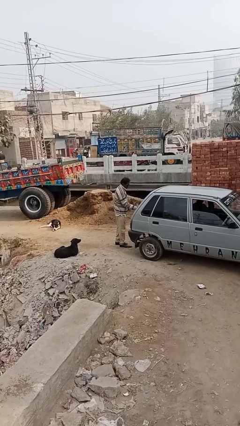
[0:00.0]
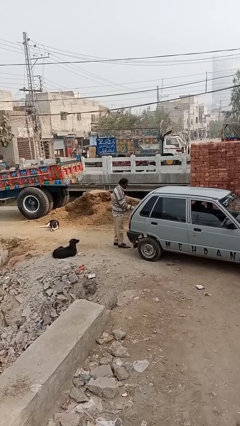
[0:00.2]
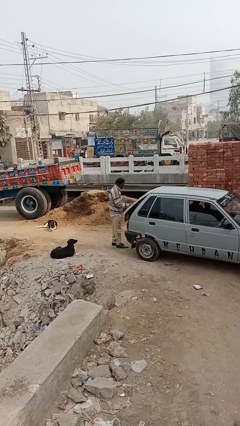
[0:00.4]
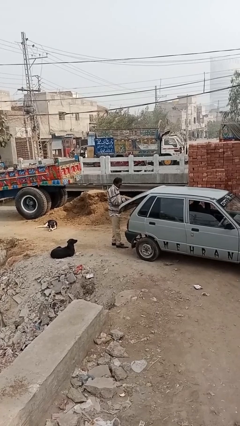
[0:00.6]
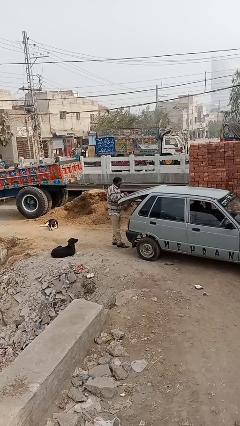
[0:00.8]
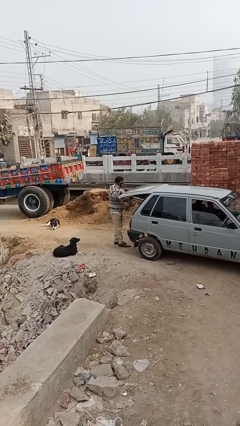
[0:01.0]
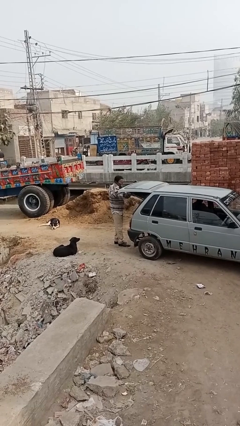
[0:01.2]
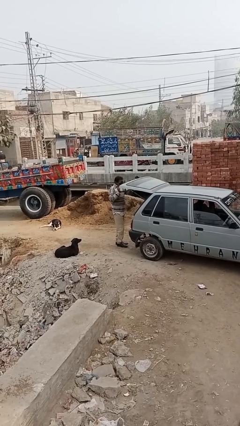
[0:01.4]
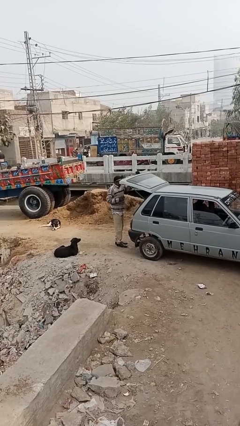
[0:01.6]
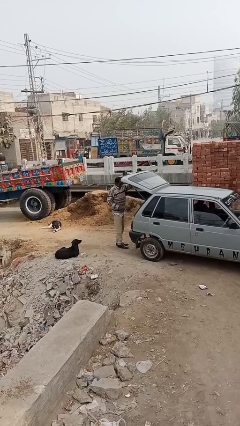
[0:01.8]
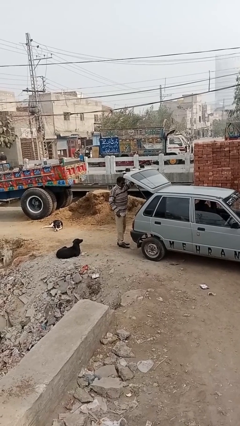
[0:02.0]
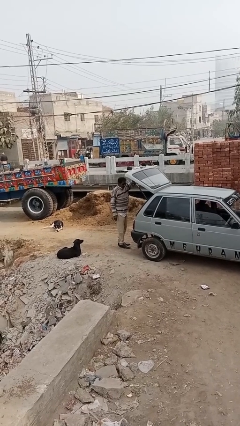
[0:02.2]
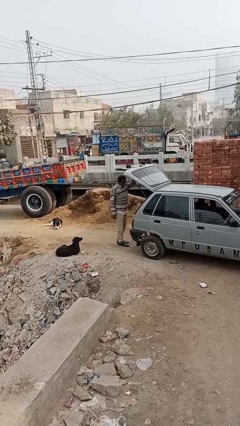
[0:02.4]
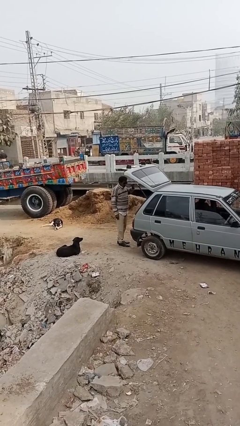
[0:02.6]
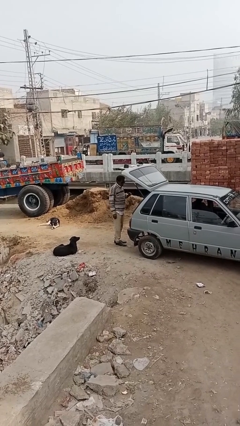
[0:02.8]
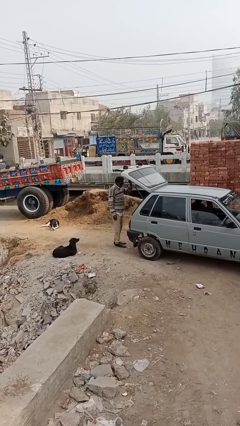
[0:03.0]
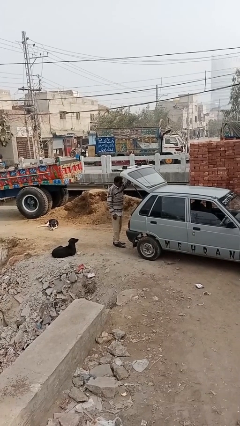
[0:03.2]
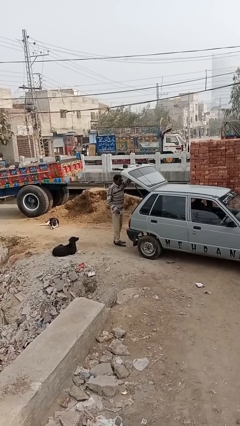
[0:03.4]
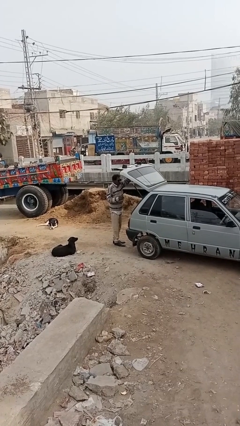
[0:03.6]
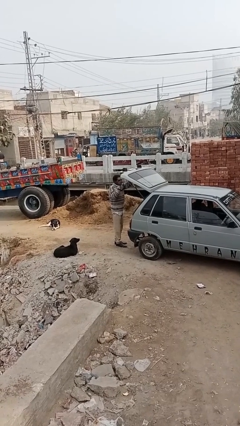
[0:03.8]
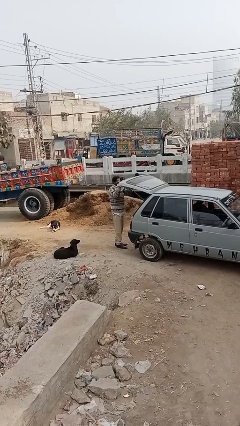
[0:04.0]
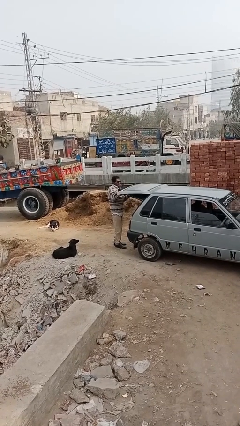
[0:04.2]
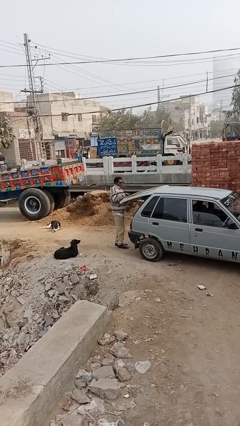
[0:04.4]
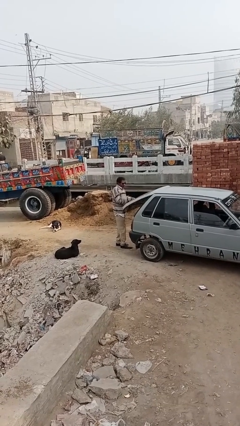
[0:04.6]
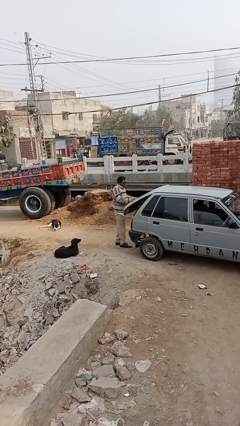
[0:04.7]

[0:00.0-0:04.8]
person opens car trunk

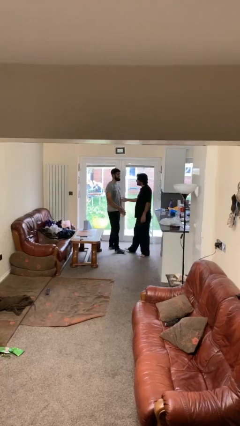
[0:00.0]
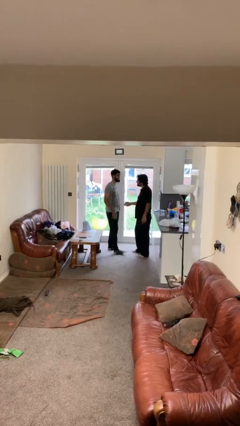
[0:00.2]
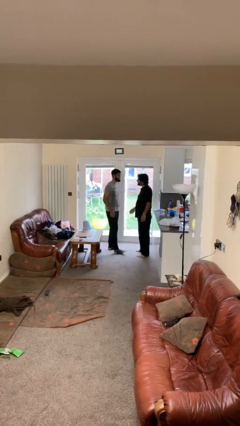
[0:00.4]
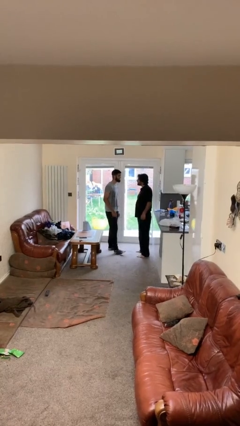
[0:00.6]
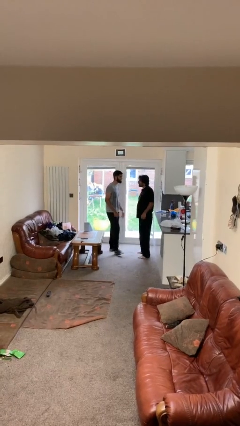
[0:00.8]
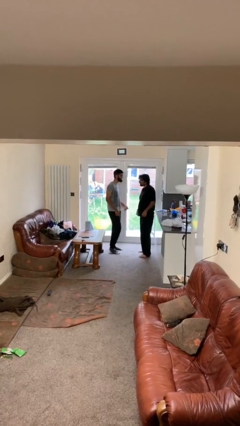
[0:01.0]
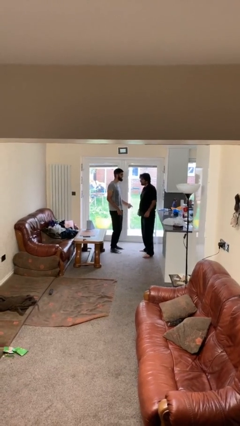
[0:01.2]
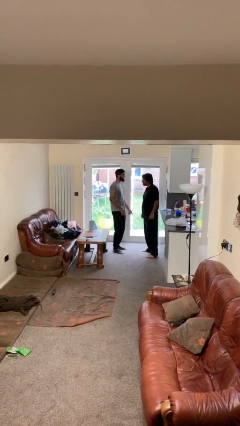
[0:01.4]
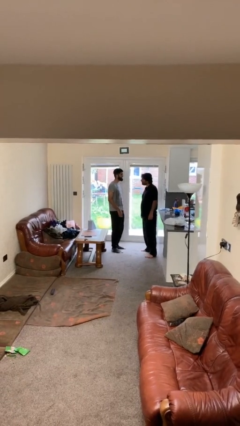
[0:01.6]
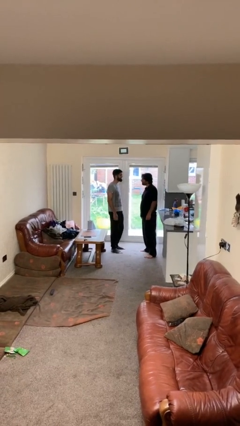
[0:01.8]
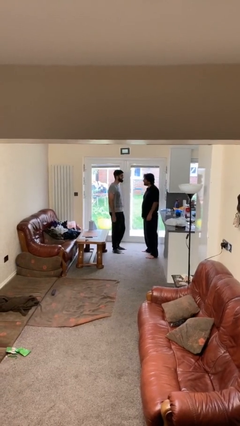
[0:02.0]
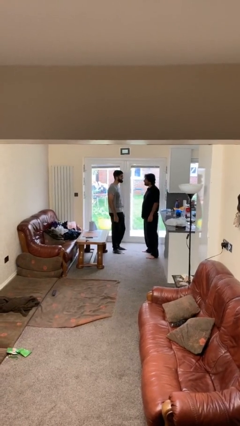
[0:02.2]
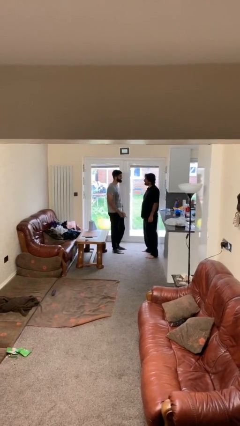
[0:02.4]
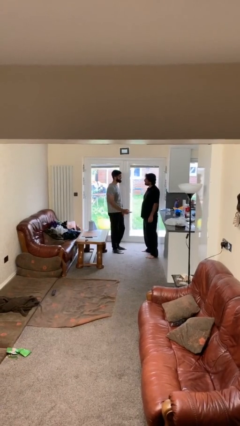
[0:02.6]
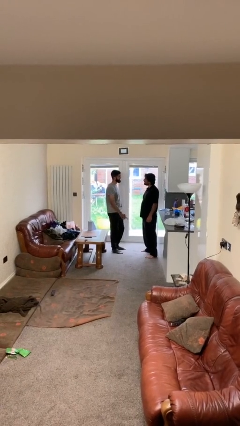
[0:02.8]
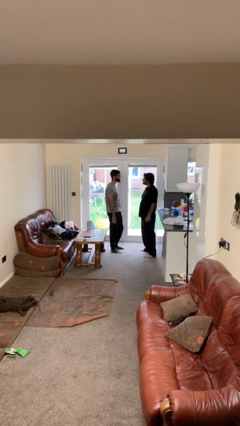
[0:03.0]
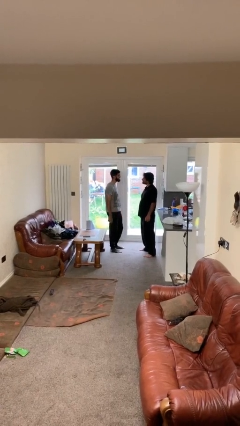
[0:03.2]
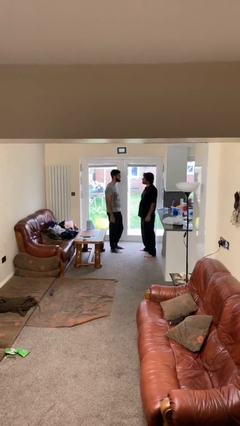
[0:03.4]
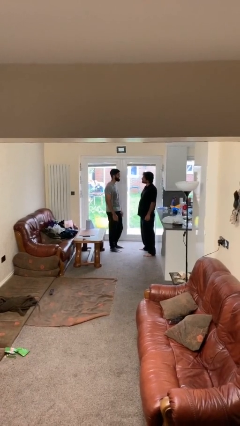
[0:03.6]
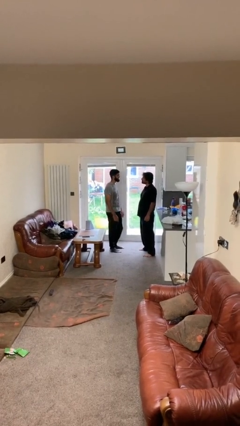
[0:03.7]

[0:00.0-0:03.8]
person talks to person

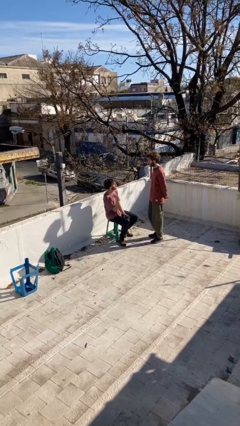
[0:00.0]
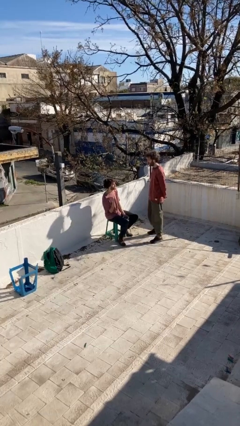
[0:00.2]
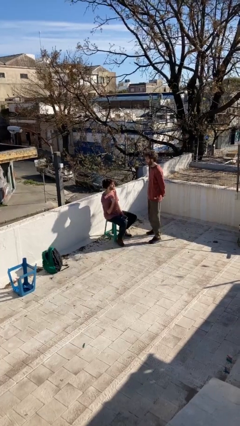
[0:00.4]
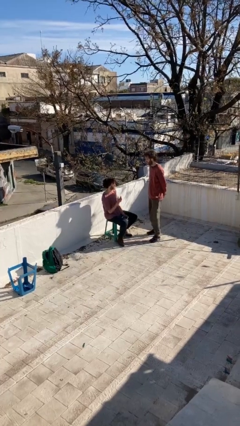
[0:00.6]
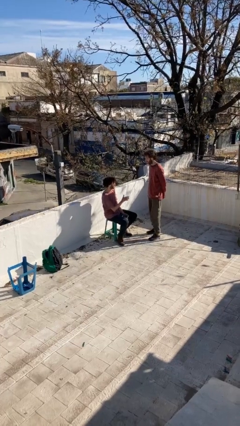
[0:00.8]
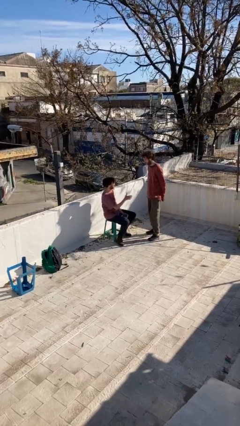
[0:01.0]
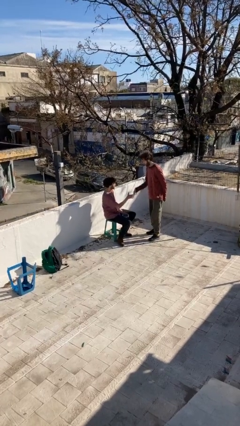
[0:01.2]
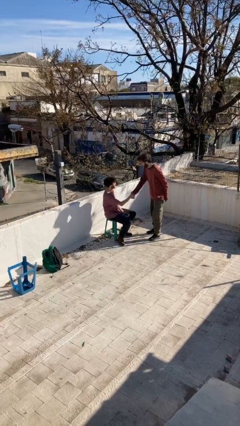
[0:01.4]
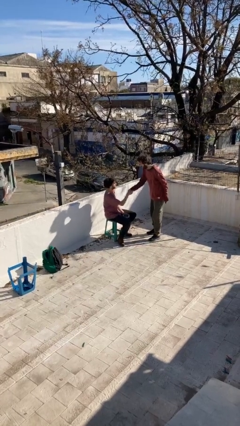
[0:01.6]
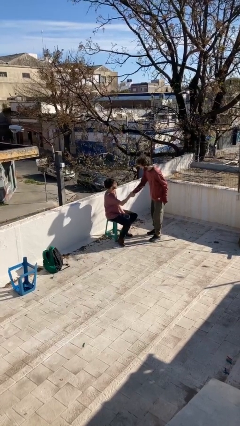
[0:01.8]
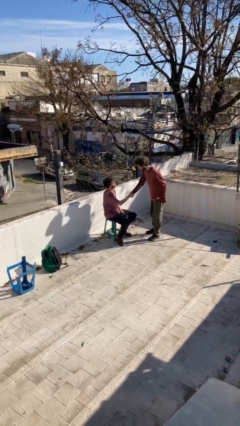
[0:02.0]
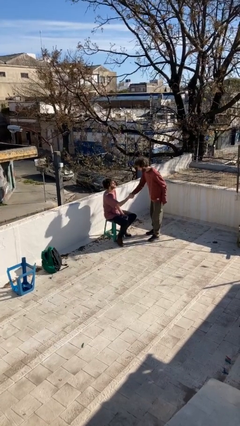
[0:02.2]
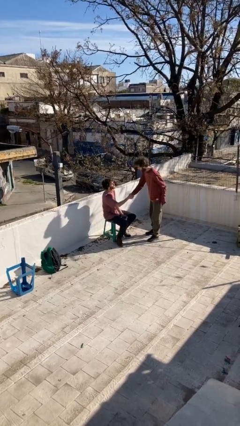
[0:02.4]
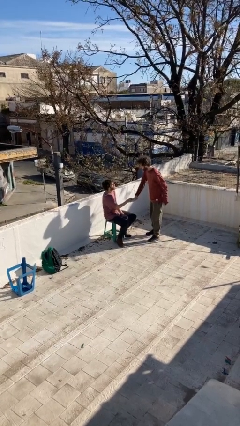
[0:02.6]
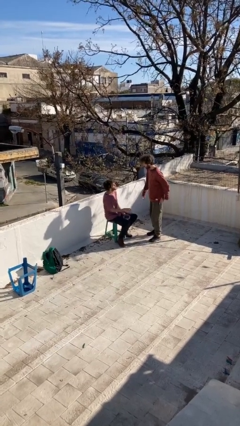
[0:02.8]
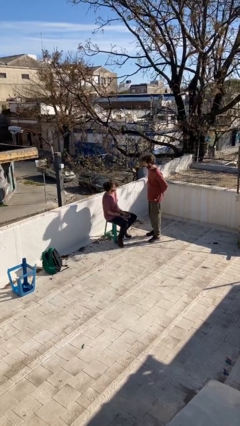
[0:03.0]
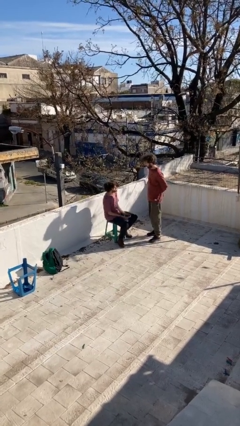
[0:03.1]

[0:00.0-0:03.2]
person shakes hand

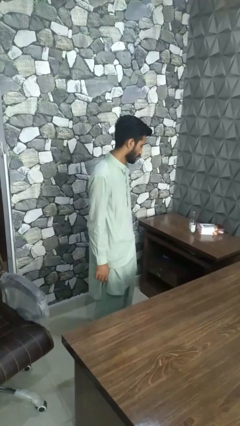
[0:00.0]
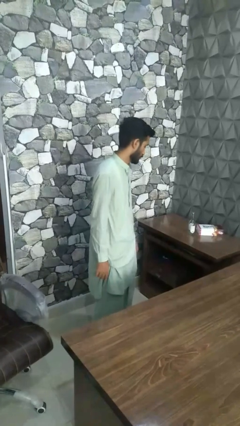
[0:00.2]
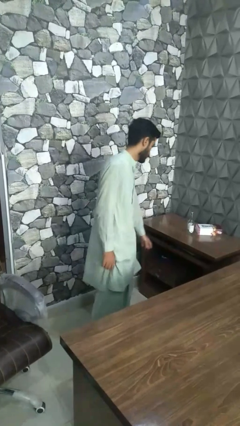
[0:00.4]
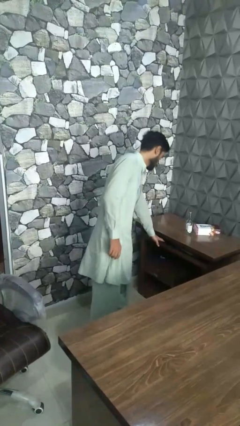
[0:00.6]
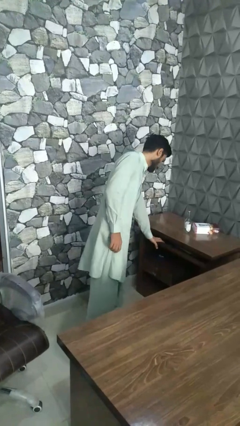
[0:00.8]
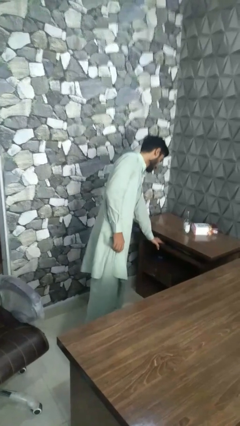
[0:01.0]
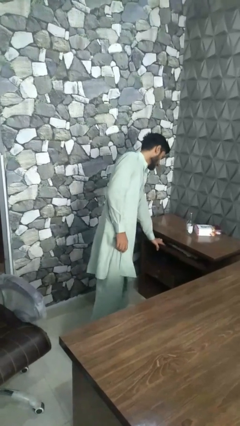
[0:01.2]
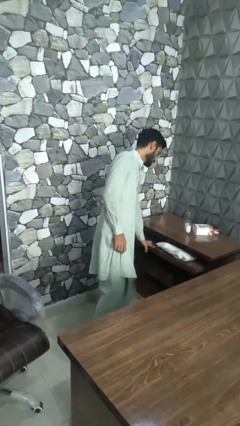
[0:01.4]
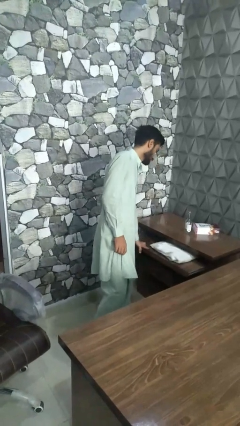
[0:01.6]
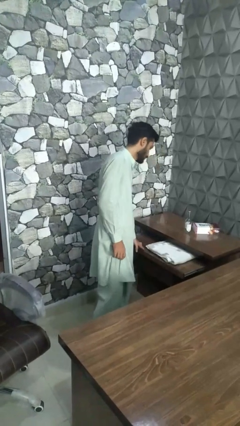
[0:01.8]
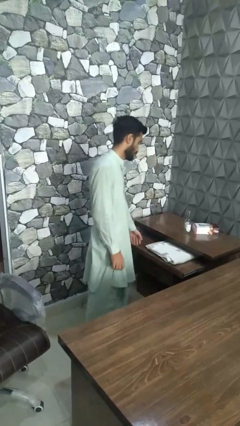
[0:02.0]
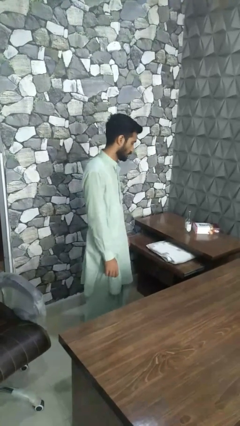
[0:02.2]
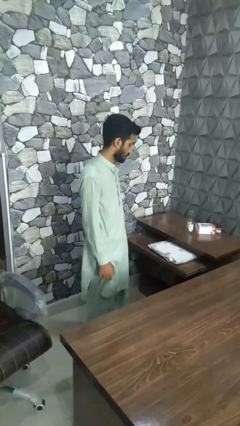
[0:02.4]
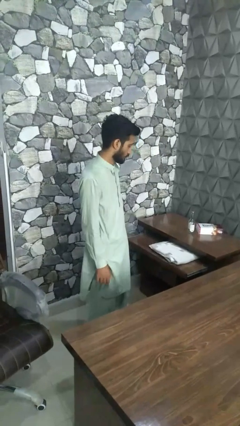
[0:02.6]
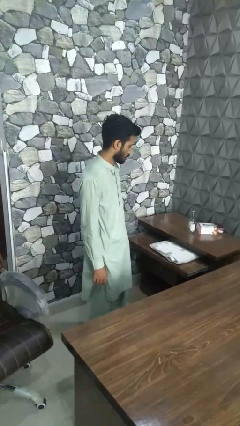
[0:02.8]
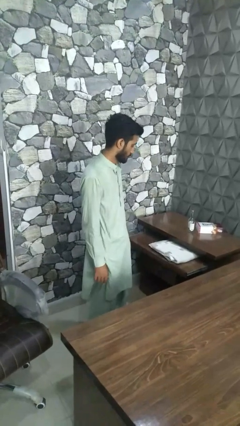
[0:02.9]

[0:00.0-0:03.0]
person opens dresser drawer

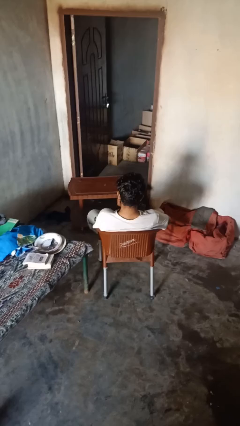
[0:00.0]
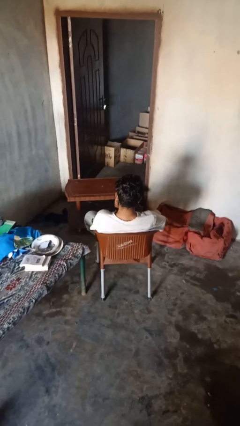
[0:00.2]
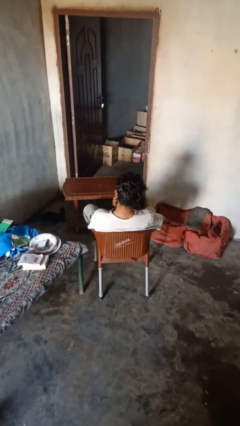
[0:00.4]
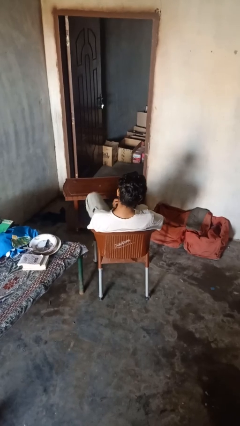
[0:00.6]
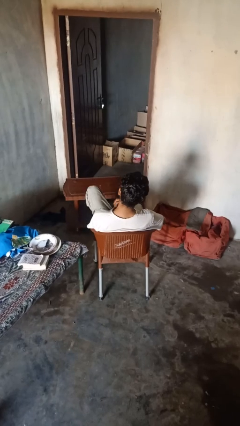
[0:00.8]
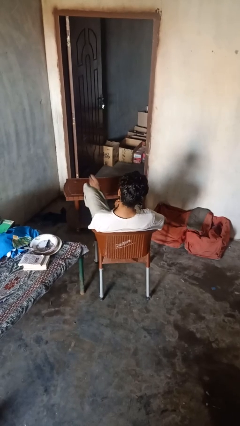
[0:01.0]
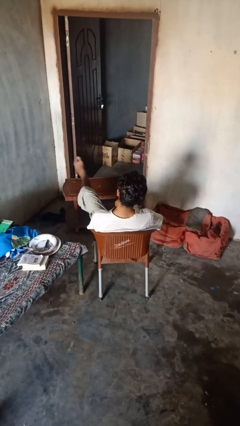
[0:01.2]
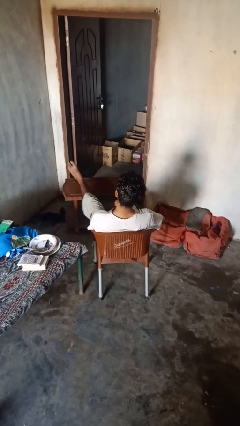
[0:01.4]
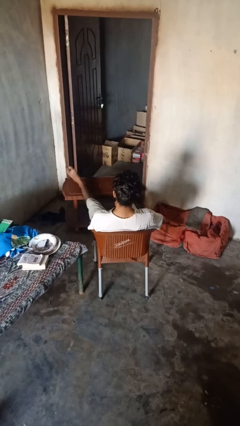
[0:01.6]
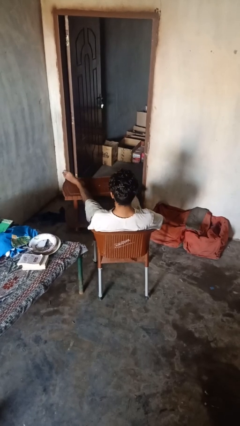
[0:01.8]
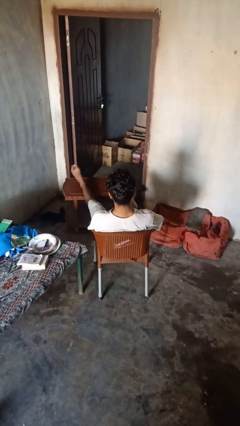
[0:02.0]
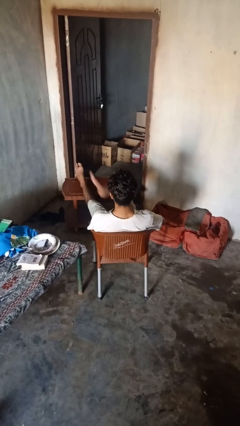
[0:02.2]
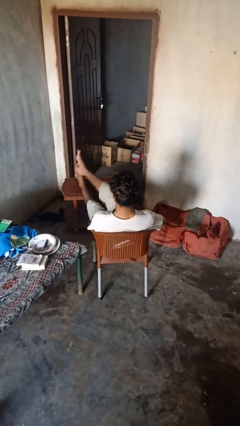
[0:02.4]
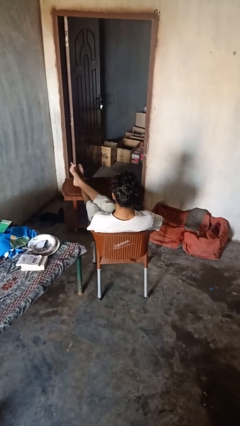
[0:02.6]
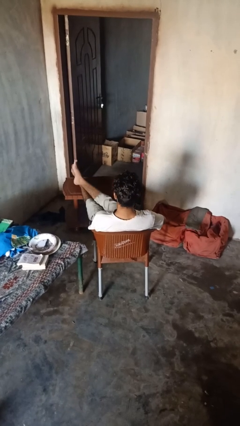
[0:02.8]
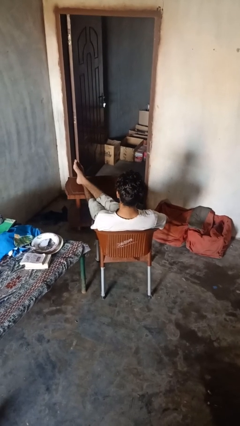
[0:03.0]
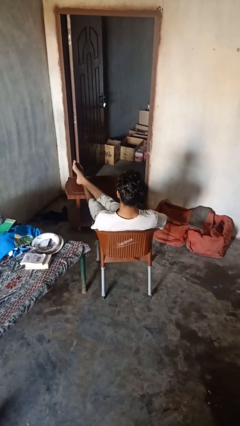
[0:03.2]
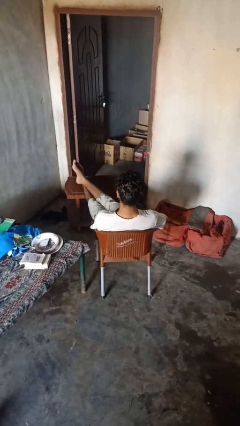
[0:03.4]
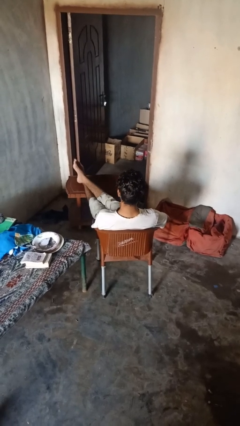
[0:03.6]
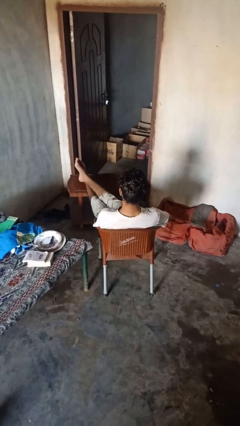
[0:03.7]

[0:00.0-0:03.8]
person puts feet up
